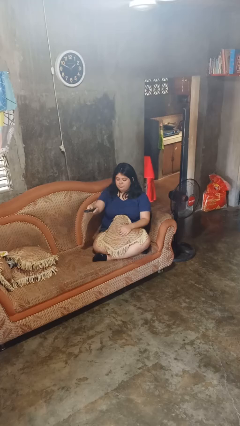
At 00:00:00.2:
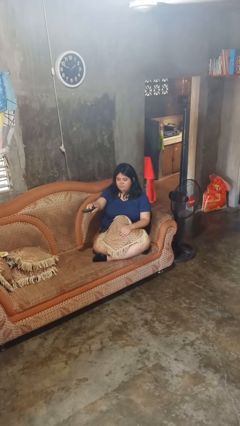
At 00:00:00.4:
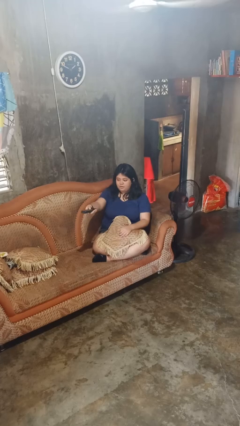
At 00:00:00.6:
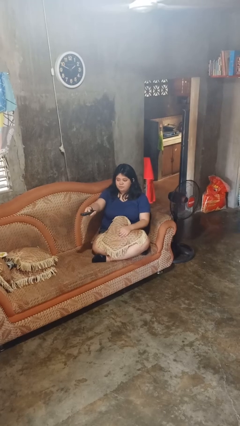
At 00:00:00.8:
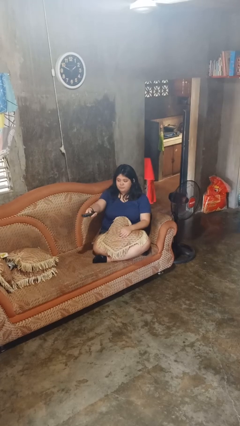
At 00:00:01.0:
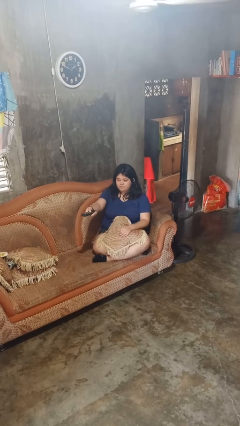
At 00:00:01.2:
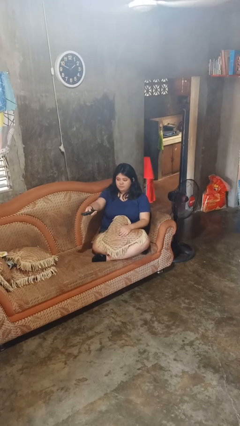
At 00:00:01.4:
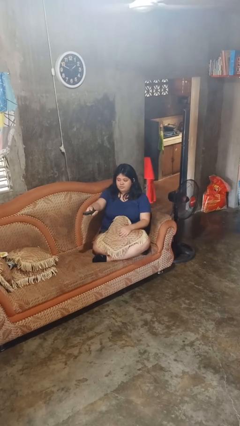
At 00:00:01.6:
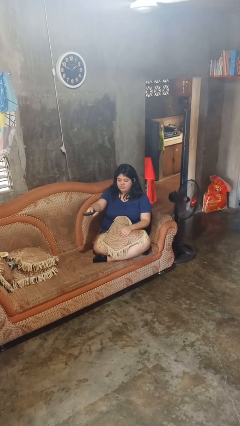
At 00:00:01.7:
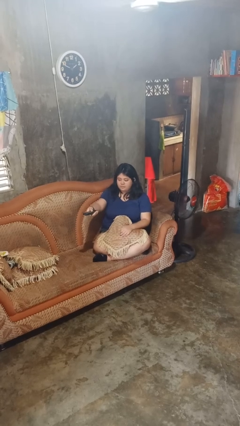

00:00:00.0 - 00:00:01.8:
person uses television remote

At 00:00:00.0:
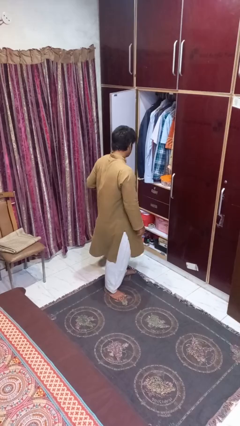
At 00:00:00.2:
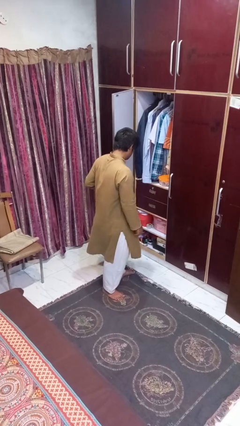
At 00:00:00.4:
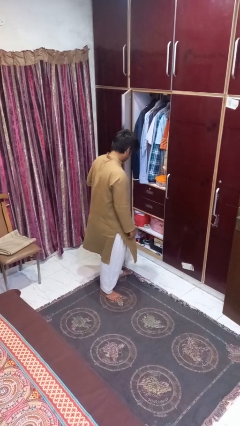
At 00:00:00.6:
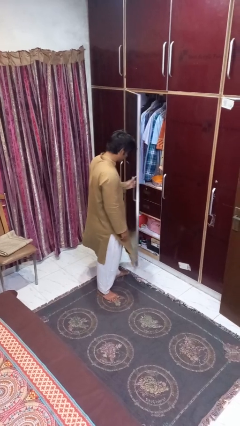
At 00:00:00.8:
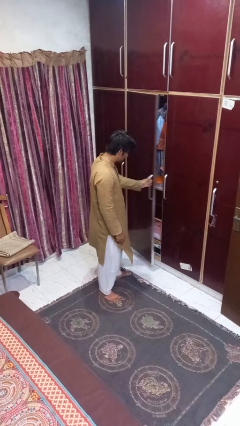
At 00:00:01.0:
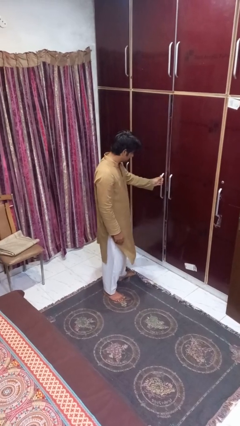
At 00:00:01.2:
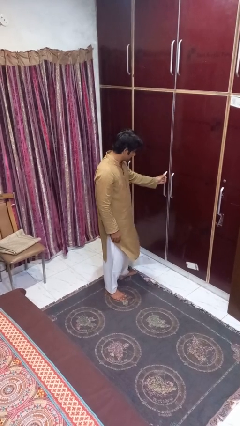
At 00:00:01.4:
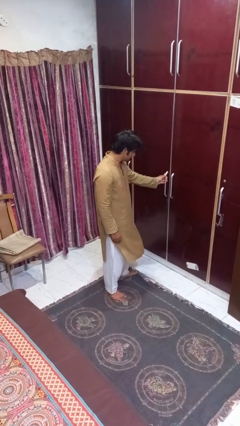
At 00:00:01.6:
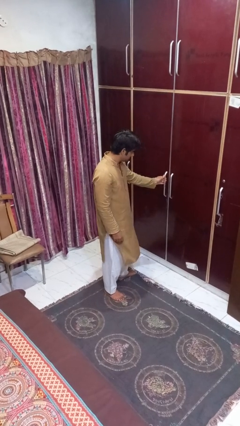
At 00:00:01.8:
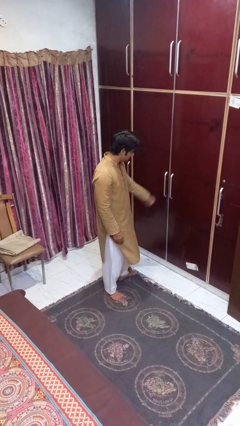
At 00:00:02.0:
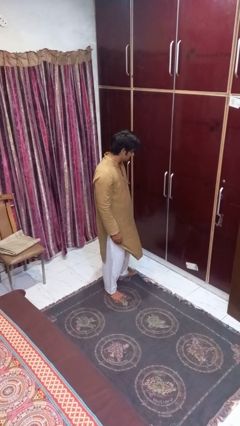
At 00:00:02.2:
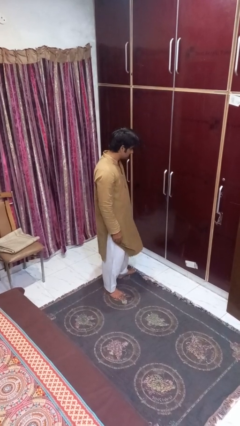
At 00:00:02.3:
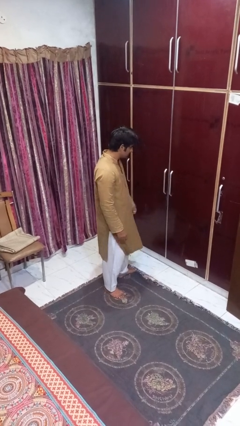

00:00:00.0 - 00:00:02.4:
person closes closet door

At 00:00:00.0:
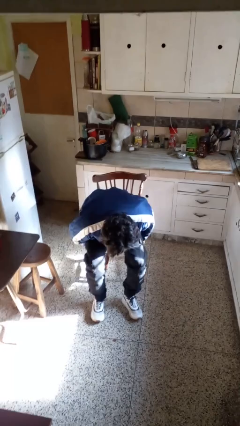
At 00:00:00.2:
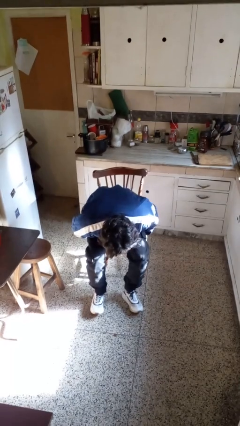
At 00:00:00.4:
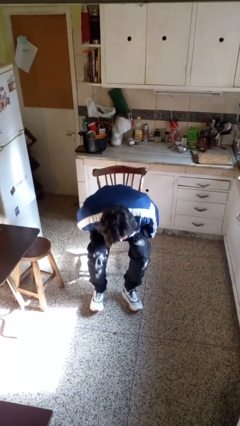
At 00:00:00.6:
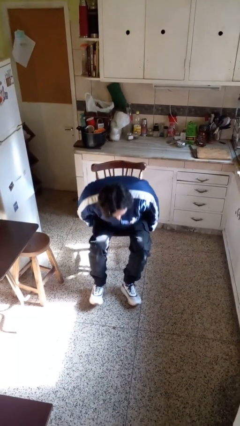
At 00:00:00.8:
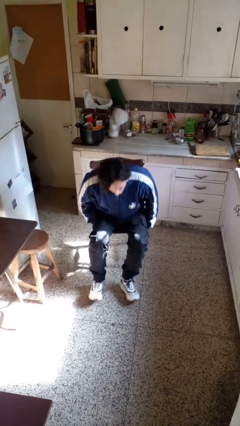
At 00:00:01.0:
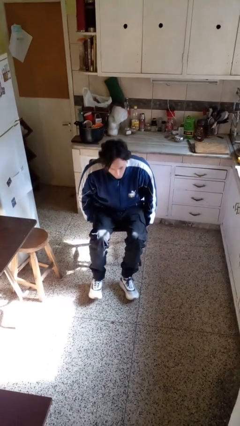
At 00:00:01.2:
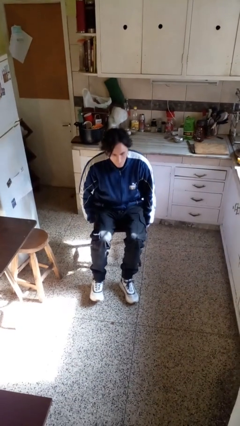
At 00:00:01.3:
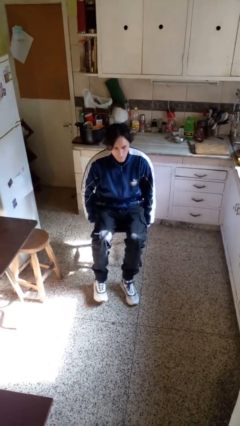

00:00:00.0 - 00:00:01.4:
person sits down

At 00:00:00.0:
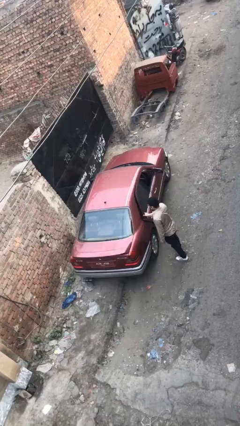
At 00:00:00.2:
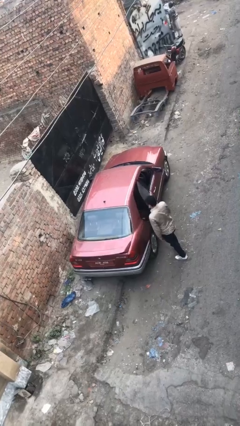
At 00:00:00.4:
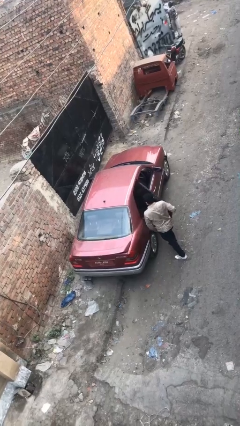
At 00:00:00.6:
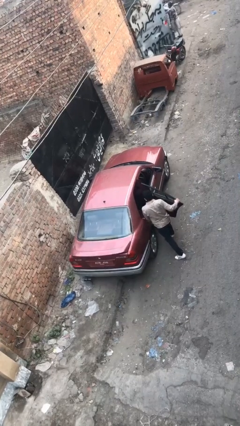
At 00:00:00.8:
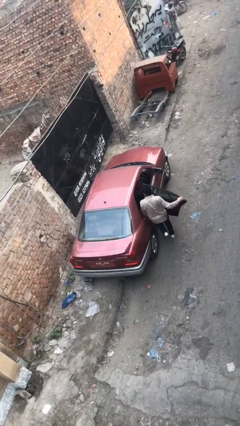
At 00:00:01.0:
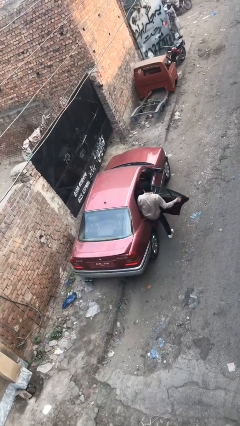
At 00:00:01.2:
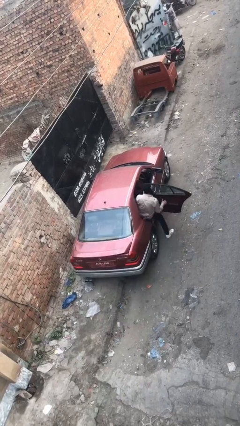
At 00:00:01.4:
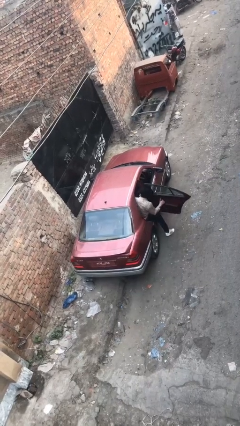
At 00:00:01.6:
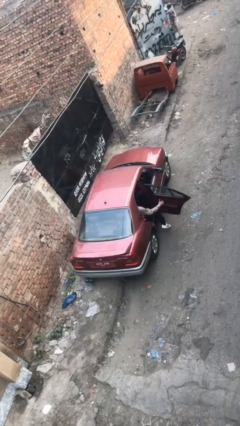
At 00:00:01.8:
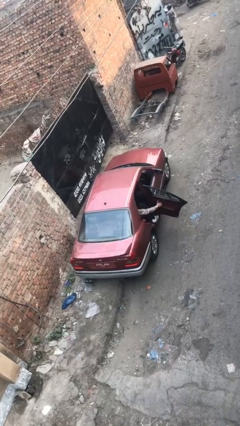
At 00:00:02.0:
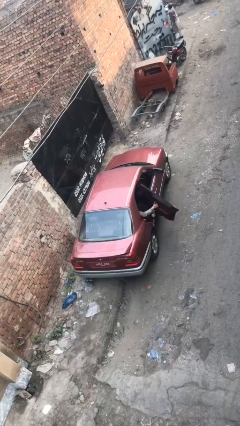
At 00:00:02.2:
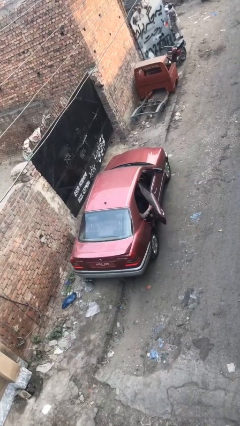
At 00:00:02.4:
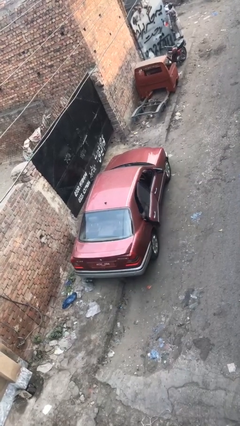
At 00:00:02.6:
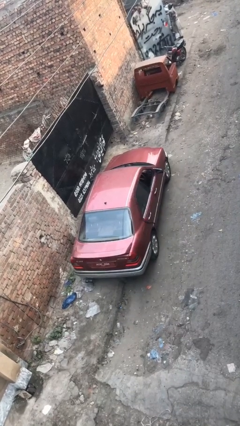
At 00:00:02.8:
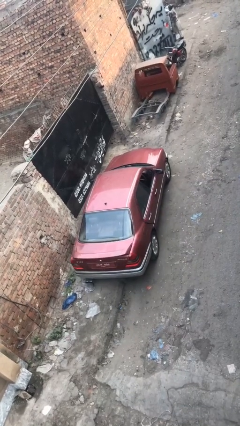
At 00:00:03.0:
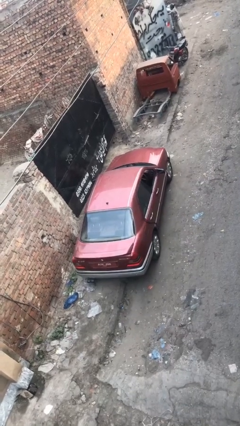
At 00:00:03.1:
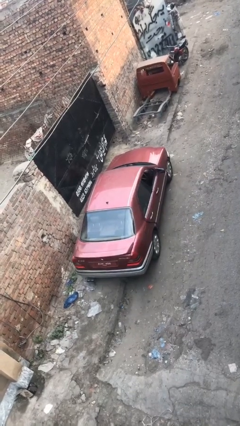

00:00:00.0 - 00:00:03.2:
car picks up person

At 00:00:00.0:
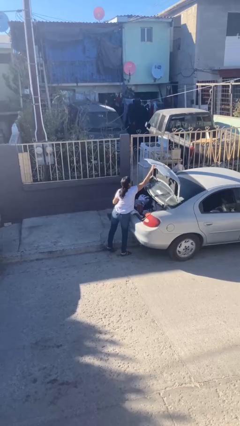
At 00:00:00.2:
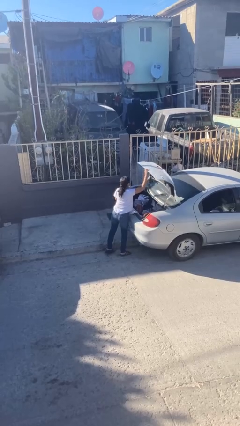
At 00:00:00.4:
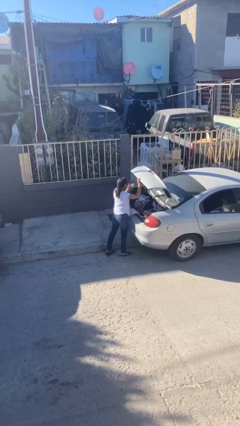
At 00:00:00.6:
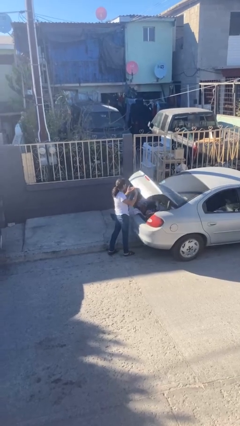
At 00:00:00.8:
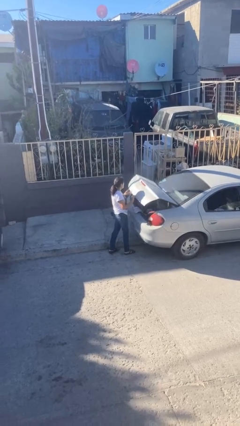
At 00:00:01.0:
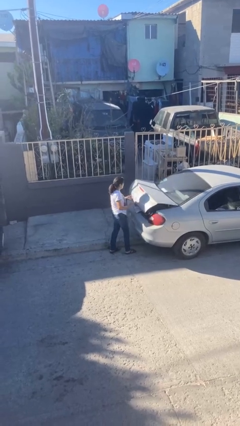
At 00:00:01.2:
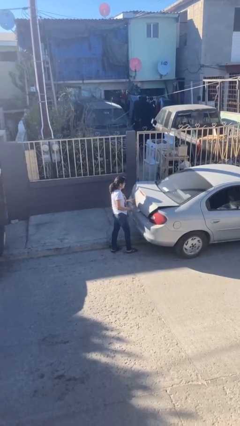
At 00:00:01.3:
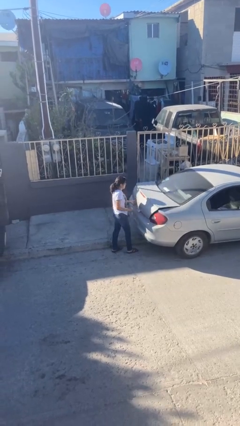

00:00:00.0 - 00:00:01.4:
person closes car trunk

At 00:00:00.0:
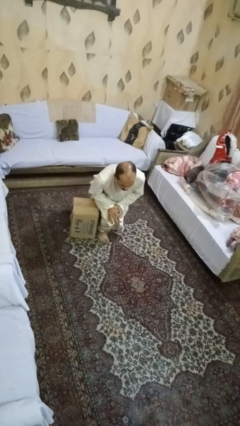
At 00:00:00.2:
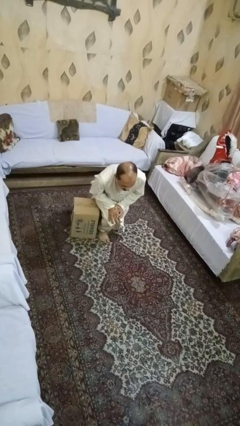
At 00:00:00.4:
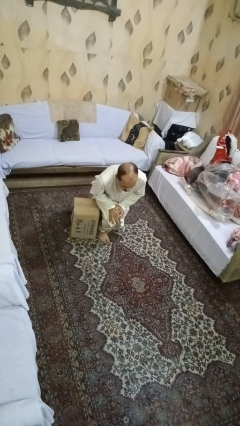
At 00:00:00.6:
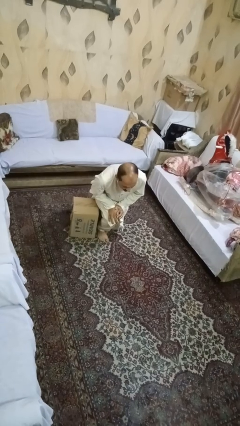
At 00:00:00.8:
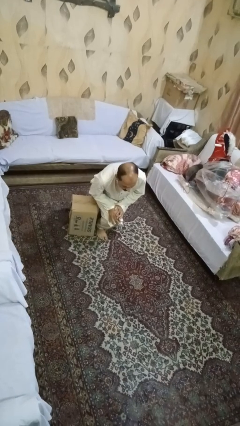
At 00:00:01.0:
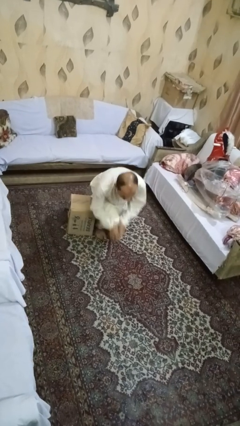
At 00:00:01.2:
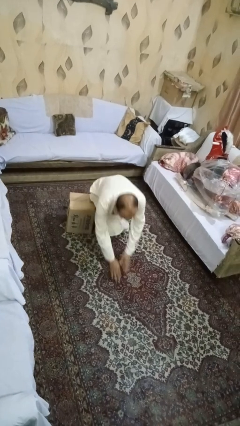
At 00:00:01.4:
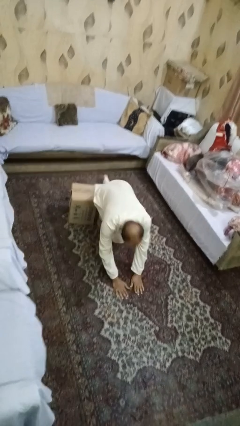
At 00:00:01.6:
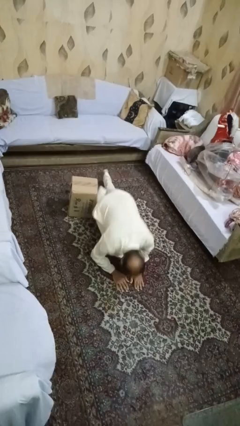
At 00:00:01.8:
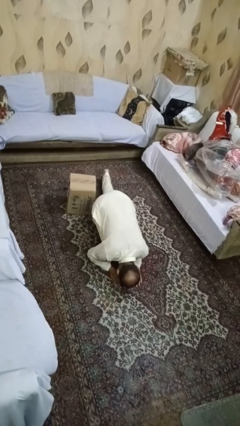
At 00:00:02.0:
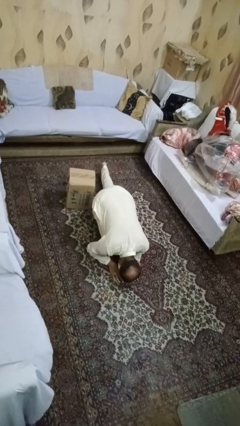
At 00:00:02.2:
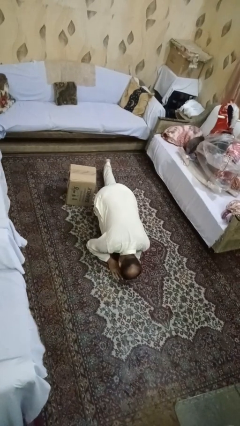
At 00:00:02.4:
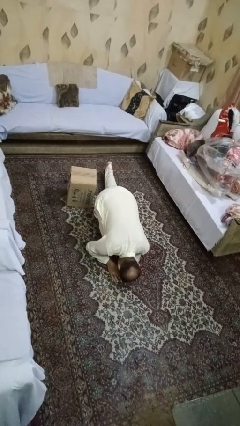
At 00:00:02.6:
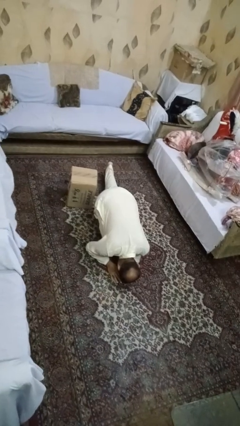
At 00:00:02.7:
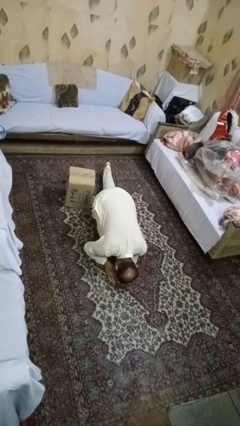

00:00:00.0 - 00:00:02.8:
person lies down on floor

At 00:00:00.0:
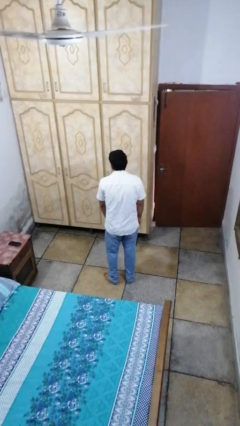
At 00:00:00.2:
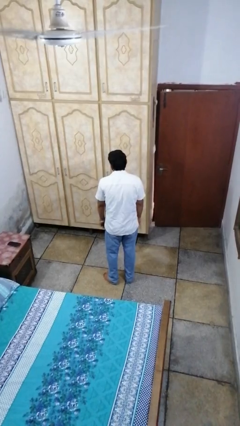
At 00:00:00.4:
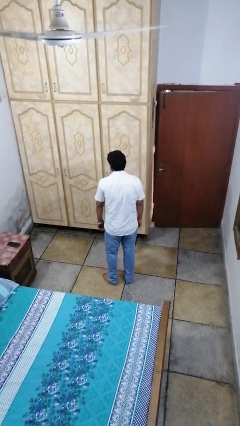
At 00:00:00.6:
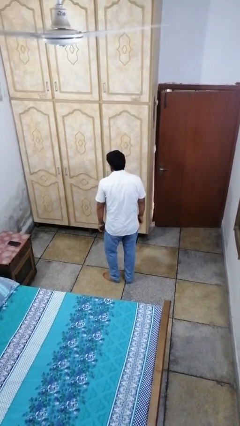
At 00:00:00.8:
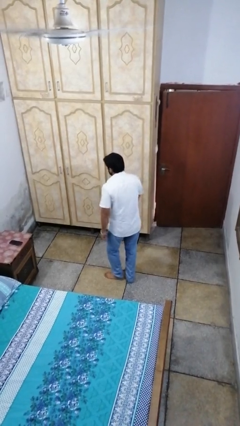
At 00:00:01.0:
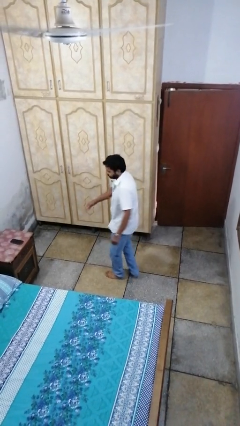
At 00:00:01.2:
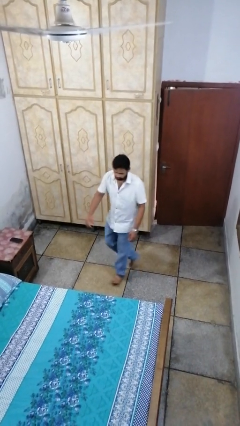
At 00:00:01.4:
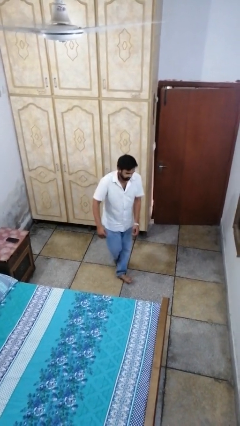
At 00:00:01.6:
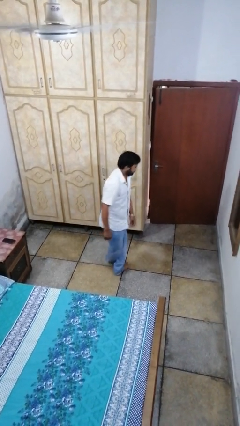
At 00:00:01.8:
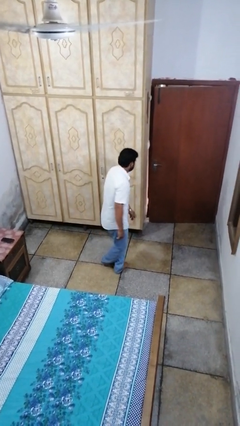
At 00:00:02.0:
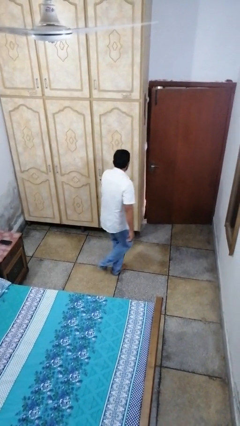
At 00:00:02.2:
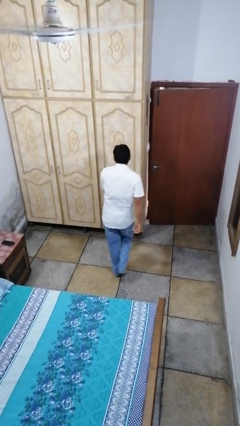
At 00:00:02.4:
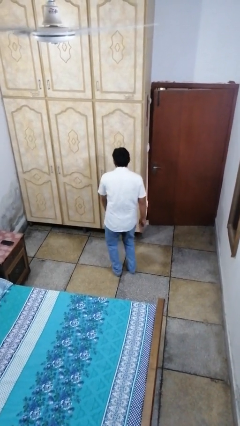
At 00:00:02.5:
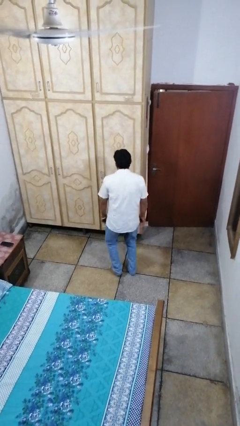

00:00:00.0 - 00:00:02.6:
person twirls

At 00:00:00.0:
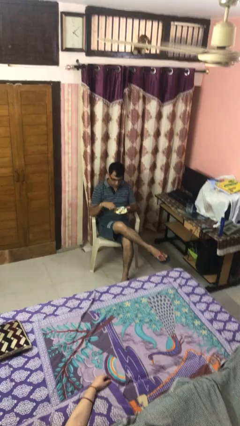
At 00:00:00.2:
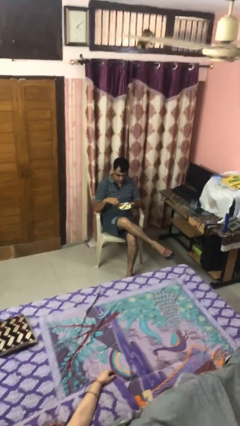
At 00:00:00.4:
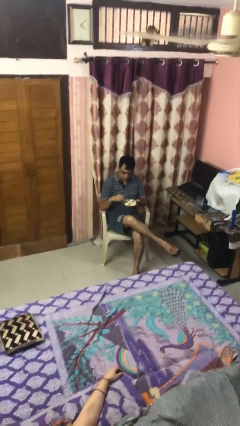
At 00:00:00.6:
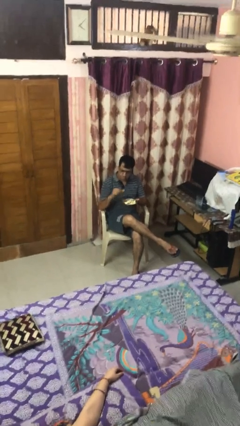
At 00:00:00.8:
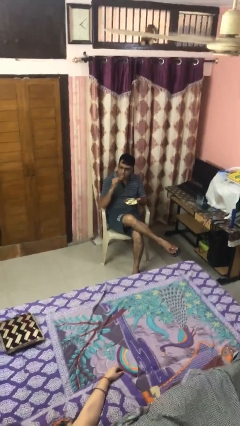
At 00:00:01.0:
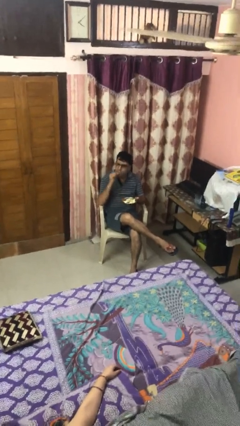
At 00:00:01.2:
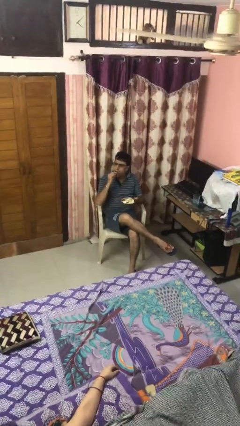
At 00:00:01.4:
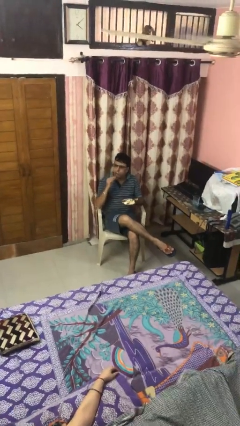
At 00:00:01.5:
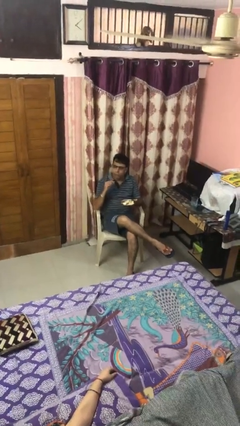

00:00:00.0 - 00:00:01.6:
person eats with hands
